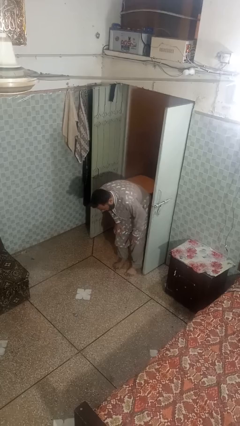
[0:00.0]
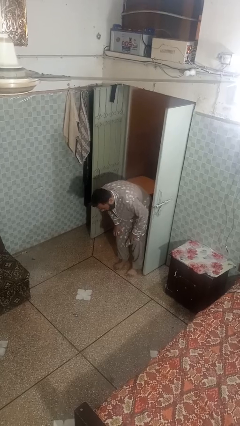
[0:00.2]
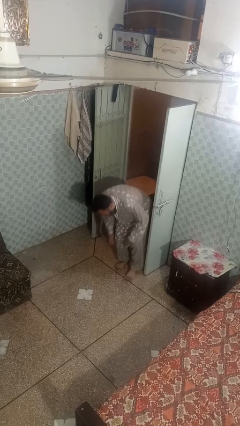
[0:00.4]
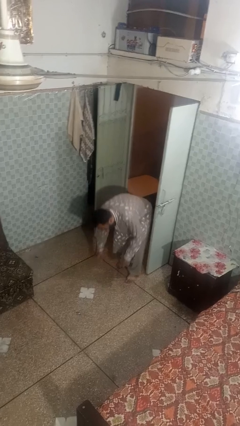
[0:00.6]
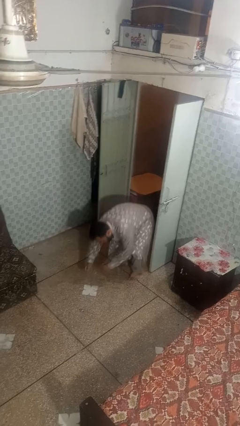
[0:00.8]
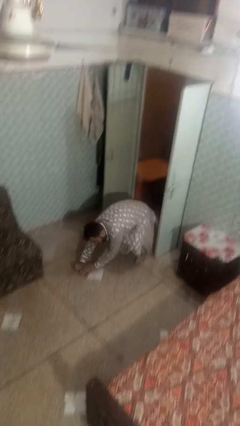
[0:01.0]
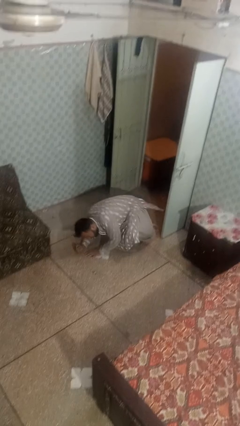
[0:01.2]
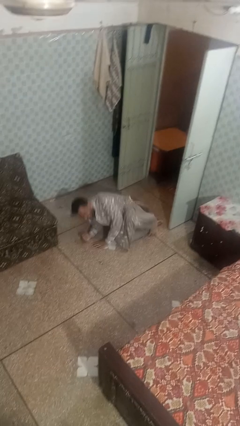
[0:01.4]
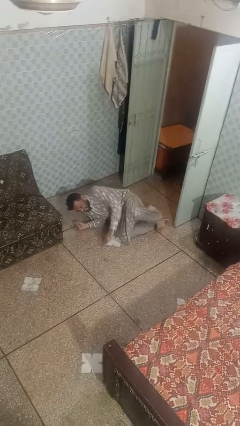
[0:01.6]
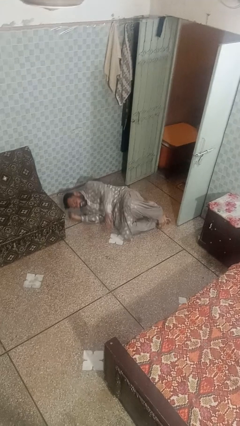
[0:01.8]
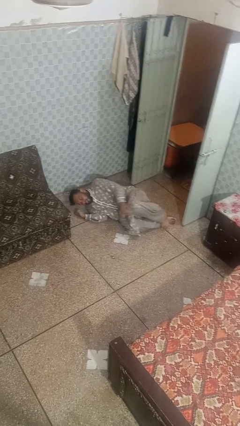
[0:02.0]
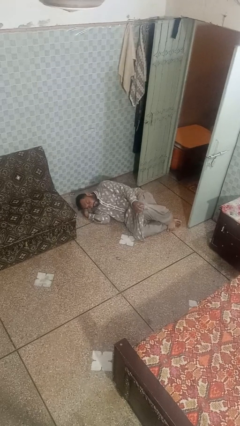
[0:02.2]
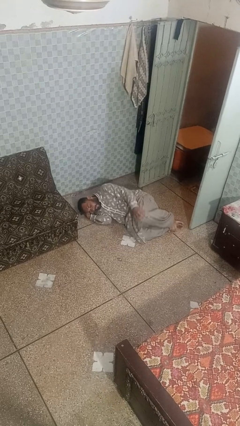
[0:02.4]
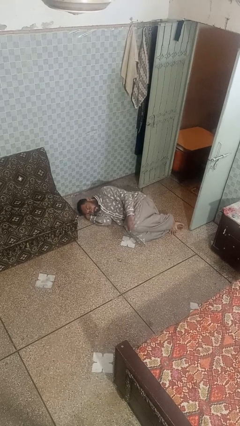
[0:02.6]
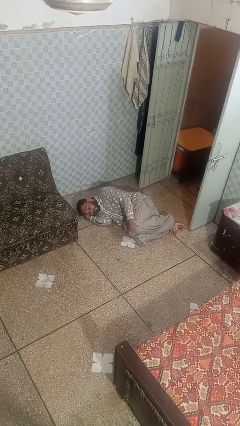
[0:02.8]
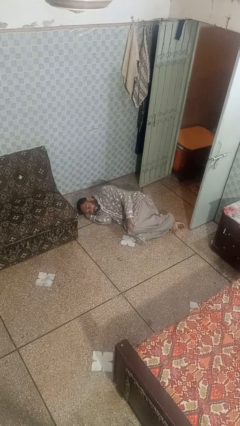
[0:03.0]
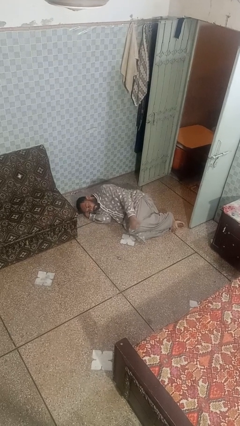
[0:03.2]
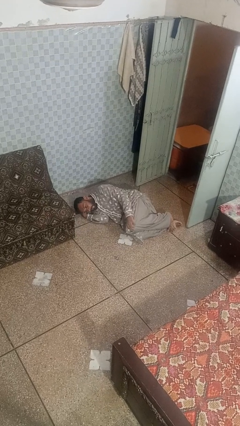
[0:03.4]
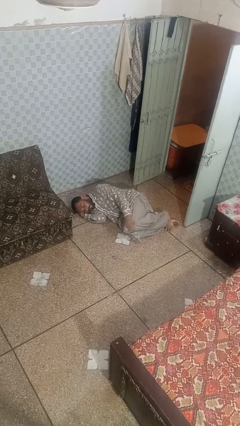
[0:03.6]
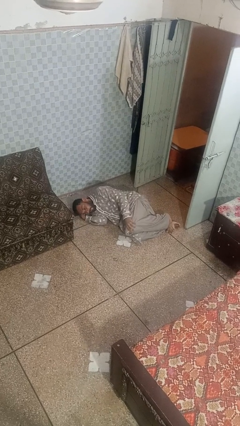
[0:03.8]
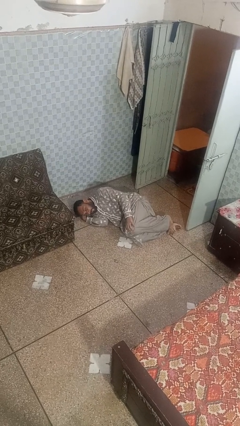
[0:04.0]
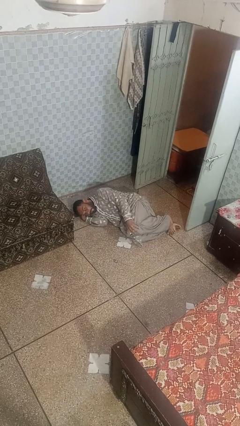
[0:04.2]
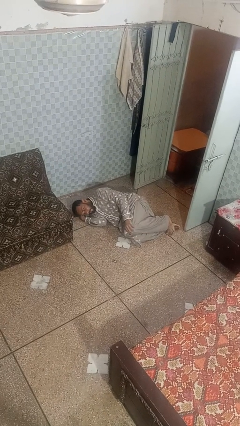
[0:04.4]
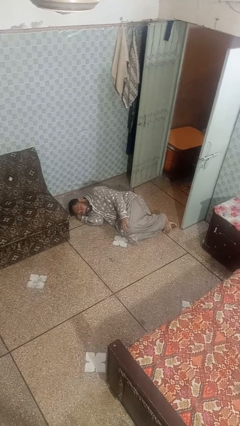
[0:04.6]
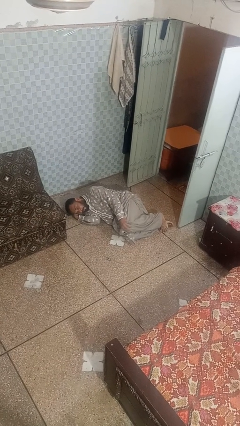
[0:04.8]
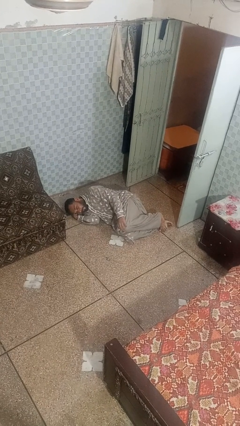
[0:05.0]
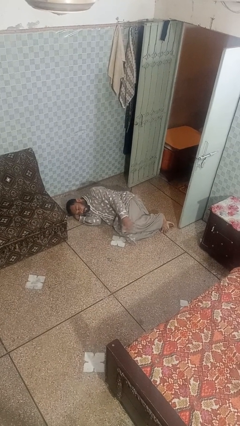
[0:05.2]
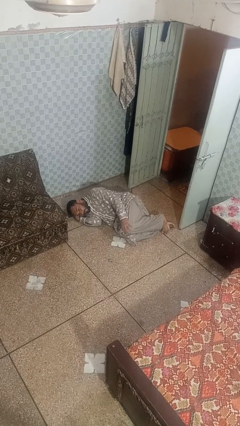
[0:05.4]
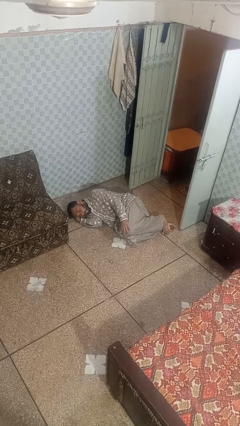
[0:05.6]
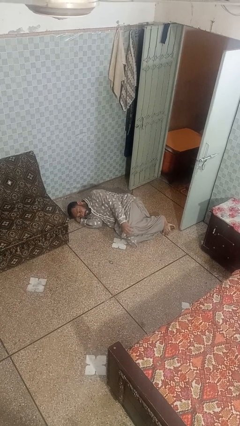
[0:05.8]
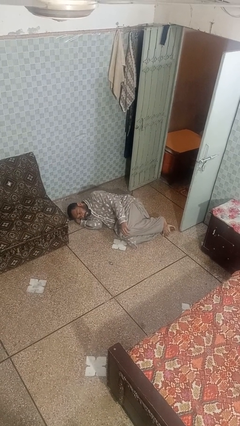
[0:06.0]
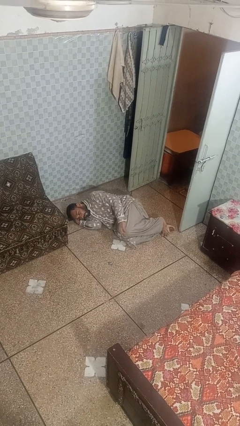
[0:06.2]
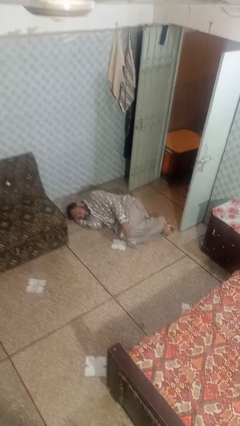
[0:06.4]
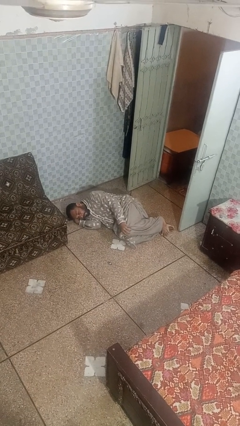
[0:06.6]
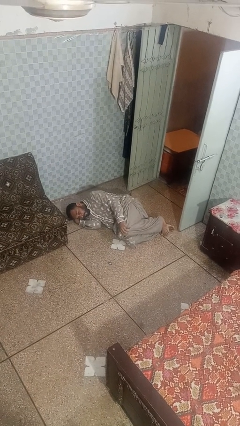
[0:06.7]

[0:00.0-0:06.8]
person lies down on floor

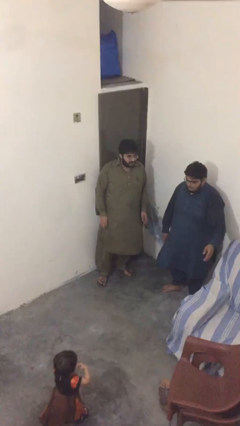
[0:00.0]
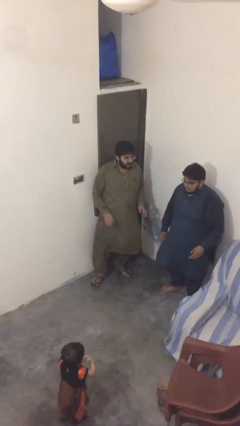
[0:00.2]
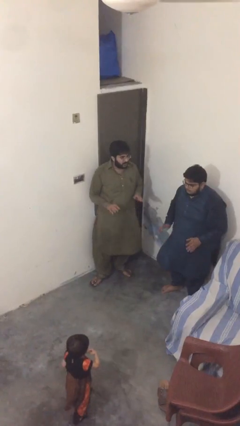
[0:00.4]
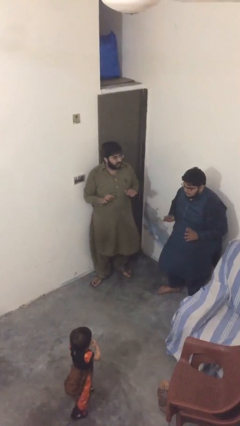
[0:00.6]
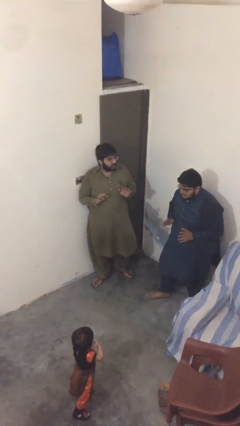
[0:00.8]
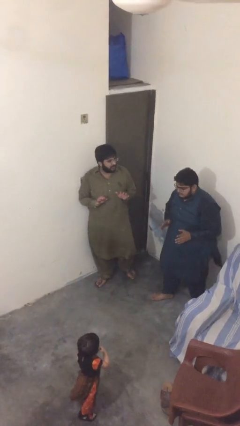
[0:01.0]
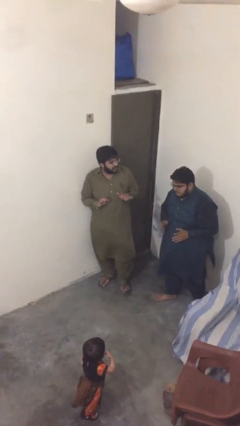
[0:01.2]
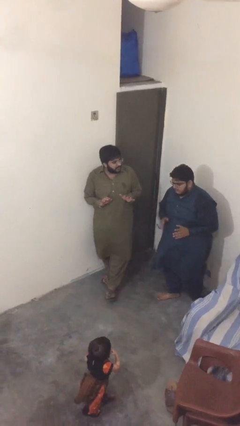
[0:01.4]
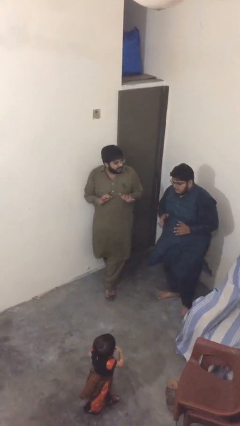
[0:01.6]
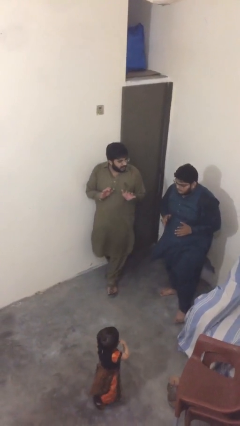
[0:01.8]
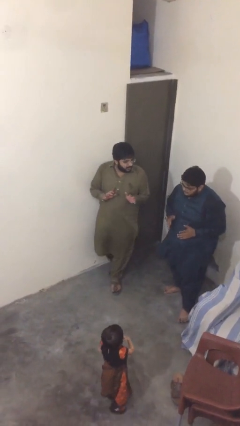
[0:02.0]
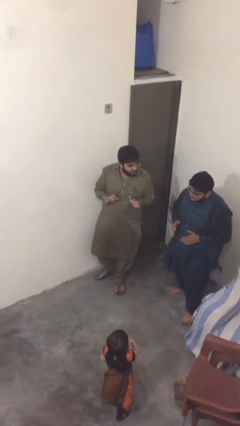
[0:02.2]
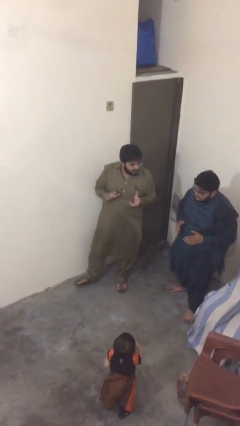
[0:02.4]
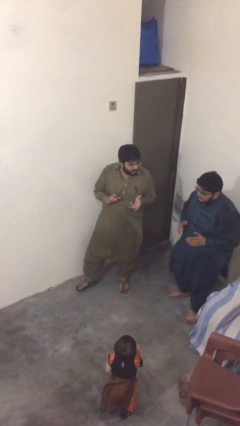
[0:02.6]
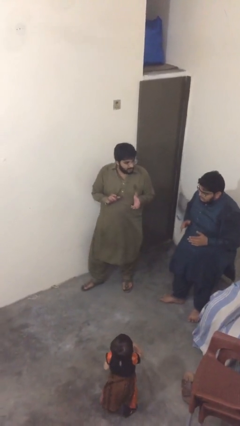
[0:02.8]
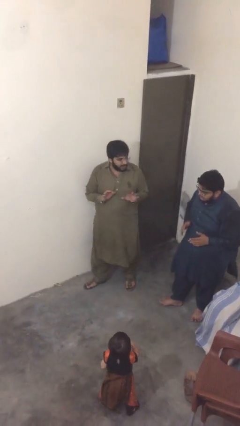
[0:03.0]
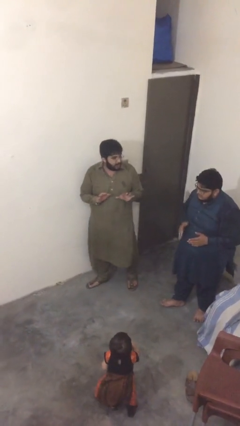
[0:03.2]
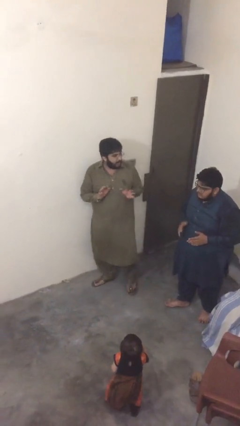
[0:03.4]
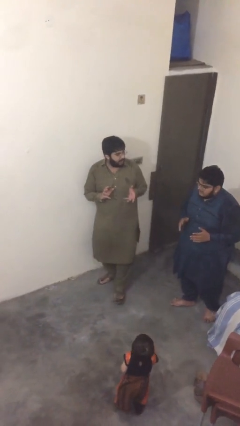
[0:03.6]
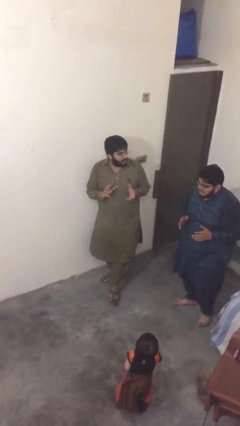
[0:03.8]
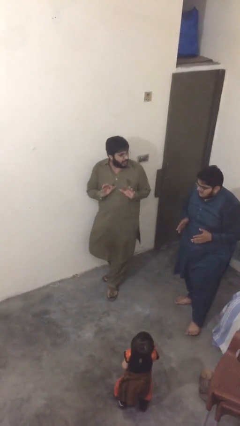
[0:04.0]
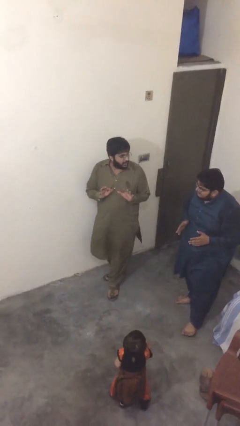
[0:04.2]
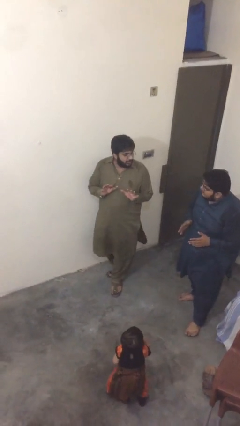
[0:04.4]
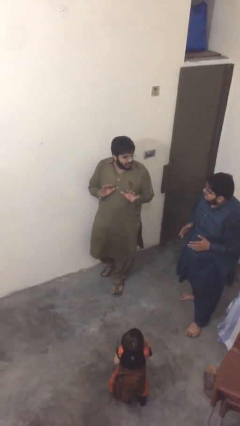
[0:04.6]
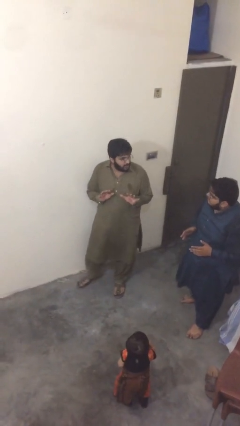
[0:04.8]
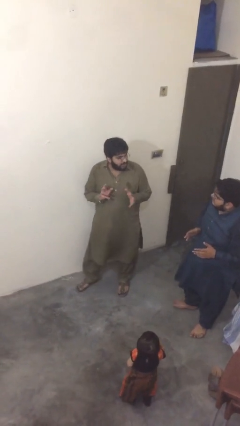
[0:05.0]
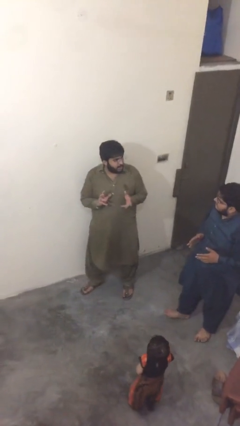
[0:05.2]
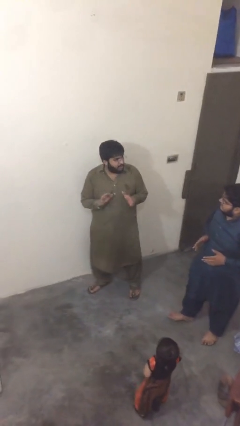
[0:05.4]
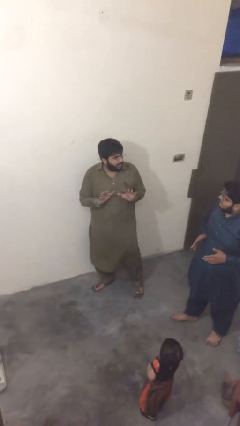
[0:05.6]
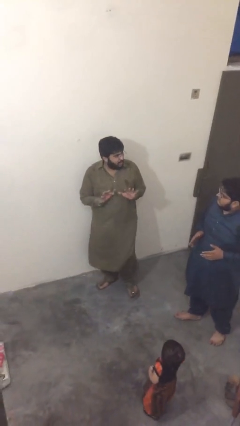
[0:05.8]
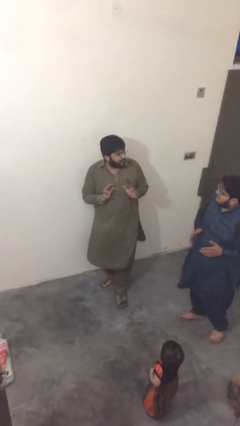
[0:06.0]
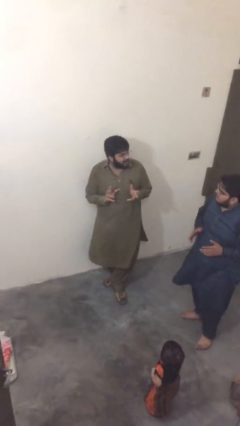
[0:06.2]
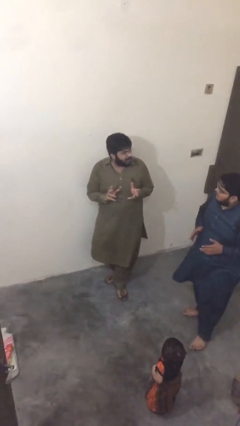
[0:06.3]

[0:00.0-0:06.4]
person talks to person

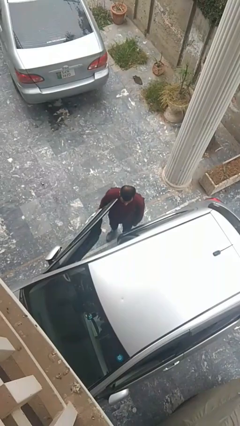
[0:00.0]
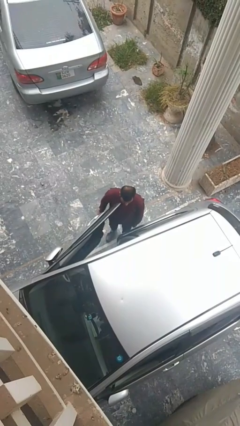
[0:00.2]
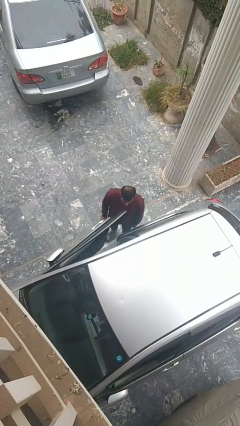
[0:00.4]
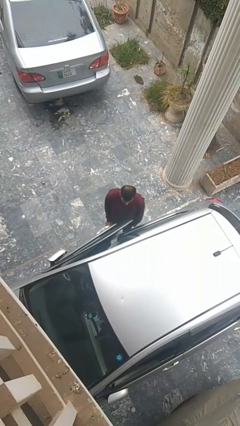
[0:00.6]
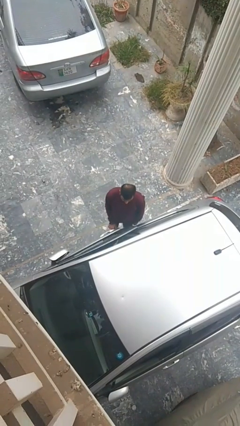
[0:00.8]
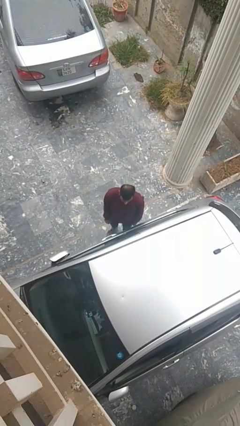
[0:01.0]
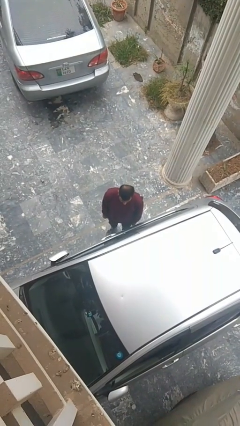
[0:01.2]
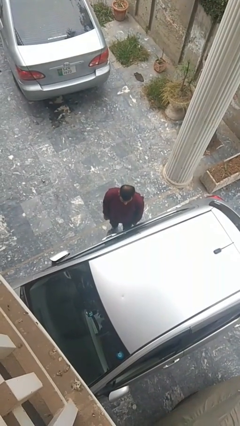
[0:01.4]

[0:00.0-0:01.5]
person closes car door

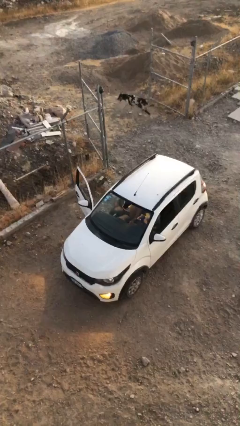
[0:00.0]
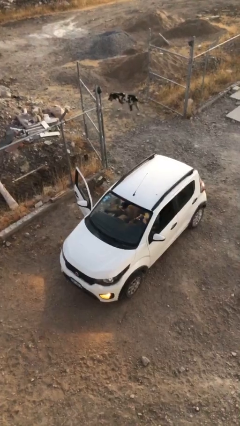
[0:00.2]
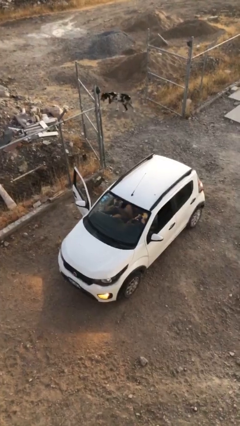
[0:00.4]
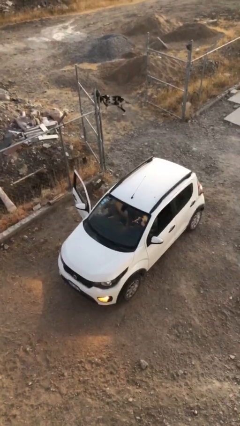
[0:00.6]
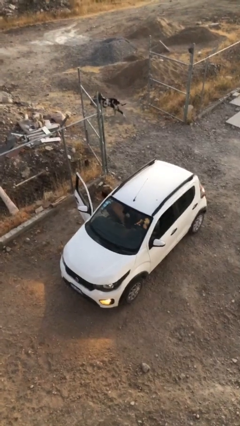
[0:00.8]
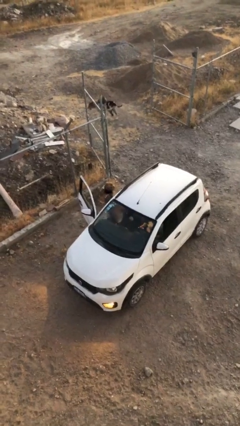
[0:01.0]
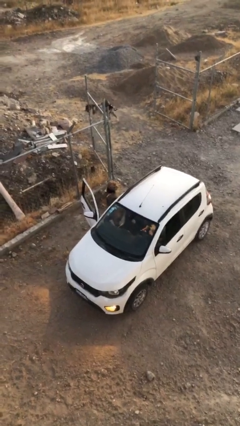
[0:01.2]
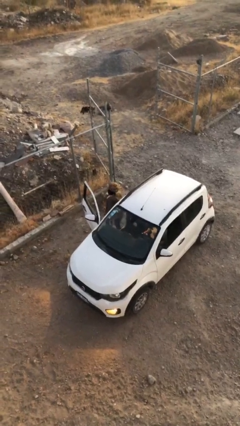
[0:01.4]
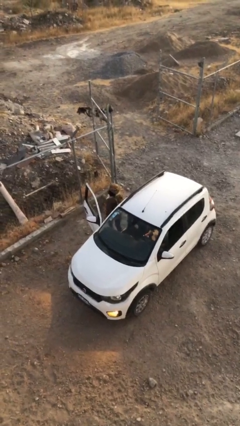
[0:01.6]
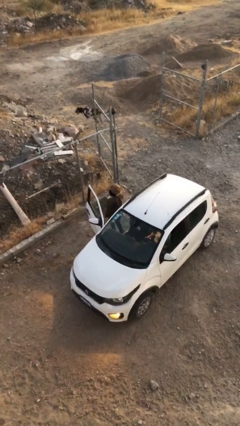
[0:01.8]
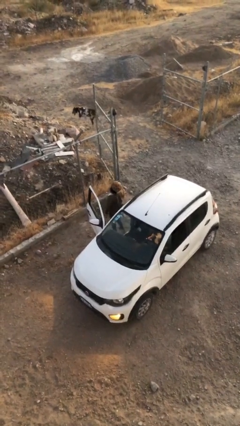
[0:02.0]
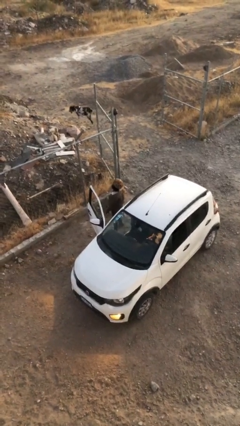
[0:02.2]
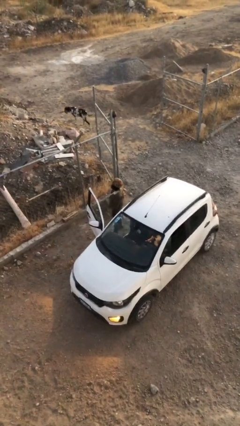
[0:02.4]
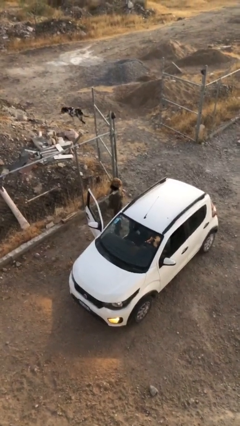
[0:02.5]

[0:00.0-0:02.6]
person exits car

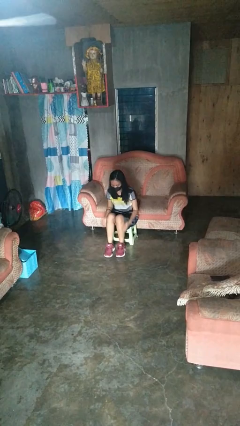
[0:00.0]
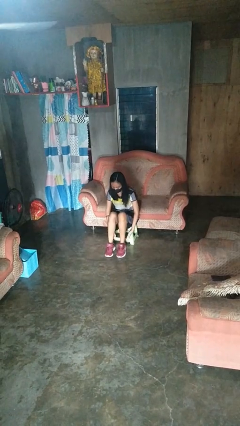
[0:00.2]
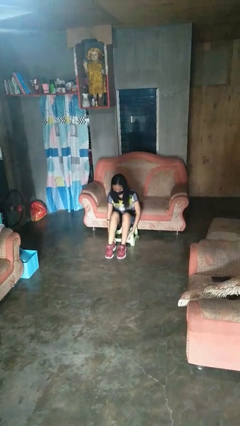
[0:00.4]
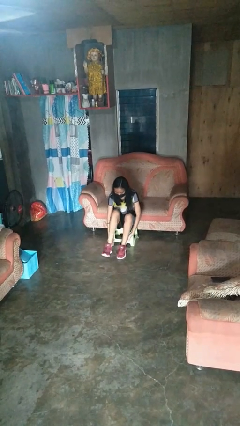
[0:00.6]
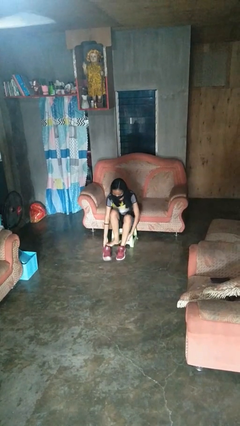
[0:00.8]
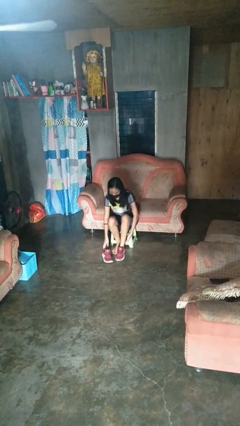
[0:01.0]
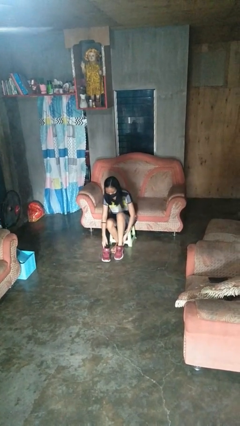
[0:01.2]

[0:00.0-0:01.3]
person takes off shoes
